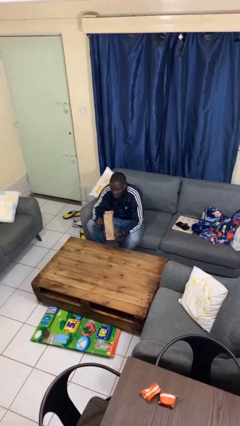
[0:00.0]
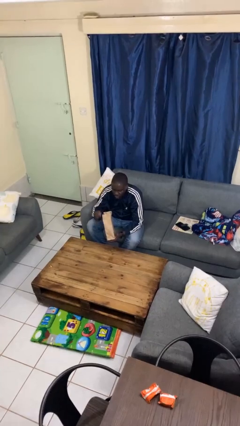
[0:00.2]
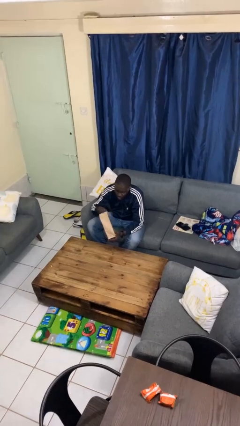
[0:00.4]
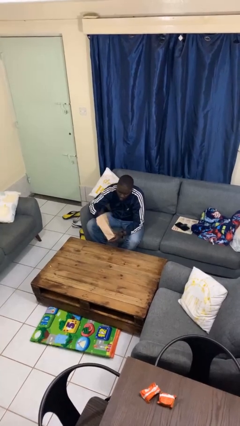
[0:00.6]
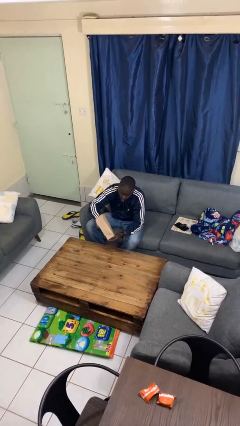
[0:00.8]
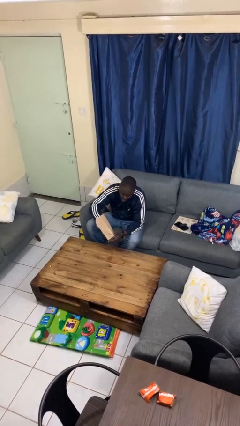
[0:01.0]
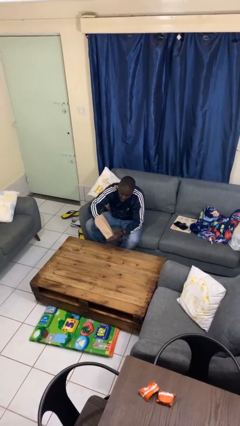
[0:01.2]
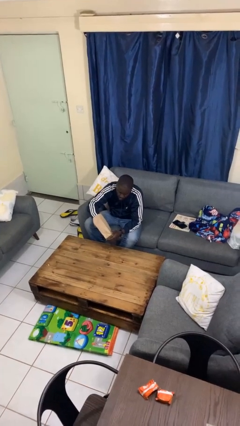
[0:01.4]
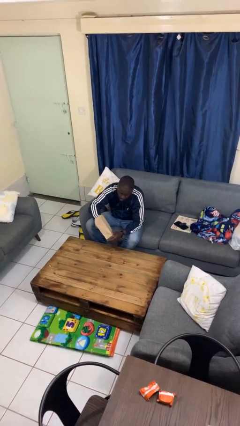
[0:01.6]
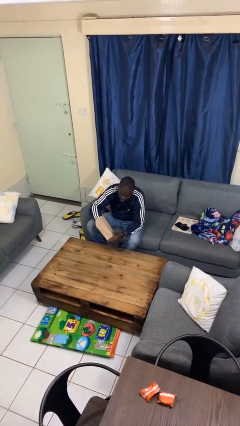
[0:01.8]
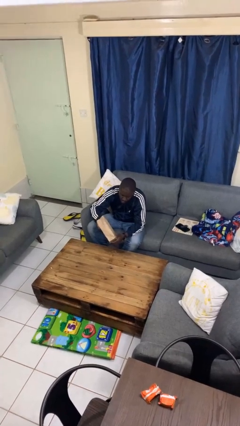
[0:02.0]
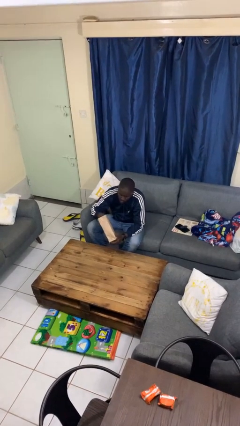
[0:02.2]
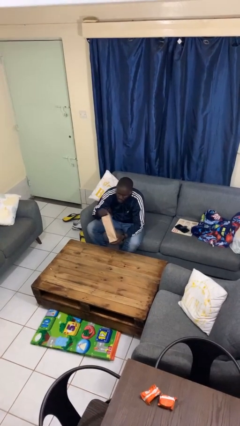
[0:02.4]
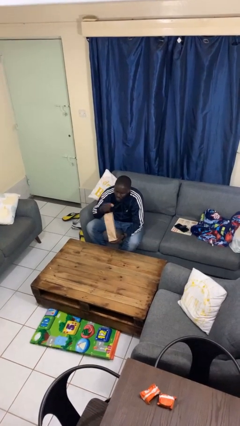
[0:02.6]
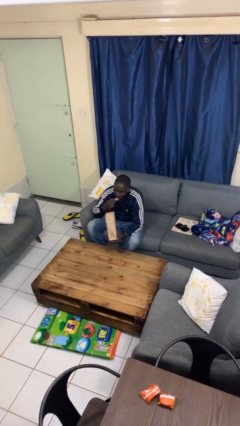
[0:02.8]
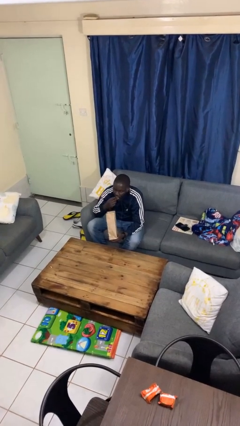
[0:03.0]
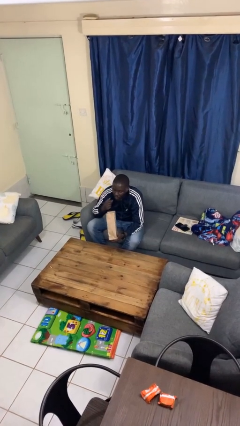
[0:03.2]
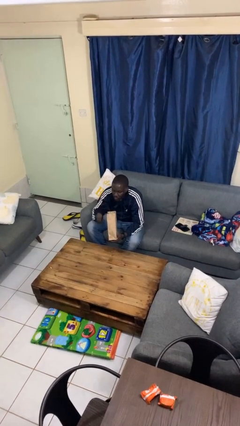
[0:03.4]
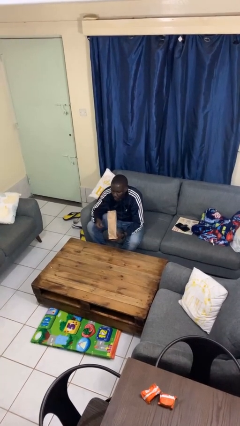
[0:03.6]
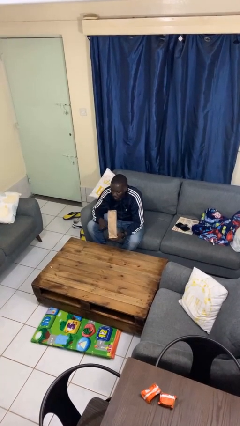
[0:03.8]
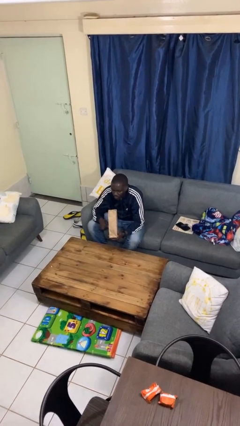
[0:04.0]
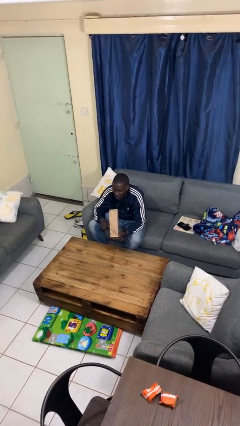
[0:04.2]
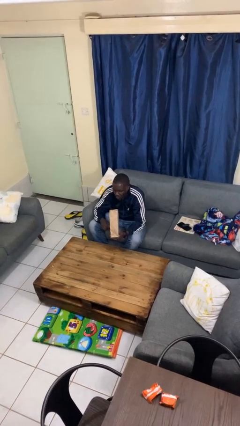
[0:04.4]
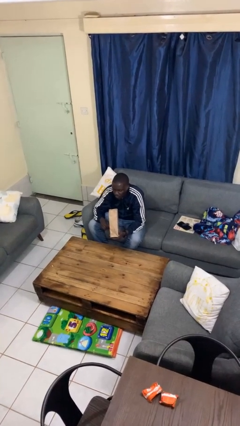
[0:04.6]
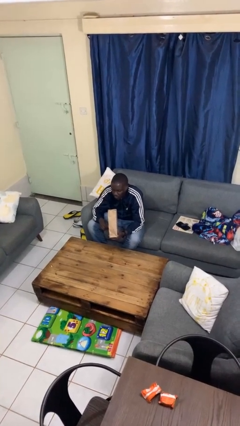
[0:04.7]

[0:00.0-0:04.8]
person eats snack from bag

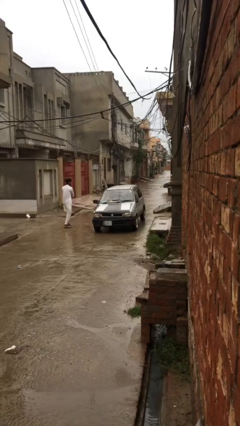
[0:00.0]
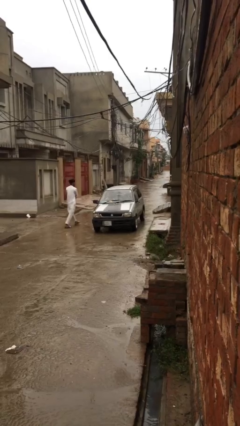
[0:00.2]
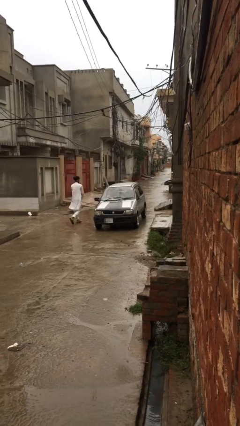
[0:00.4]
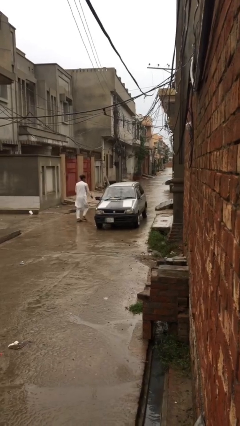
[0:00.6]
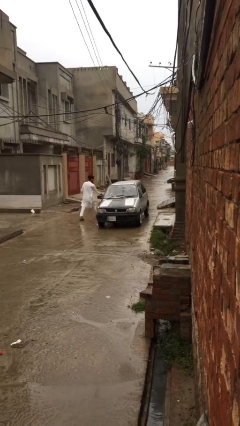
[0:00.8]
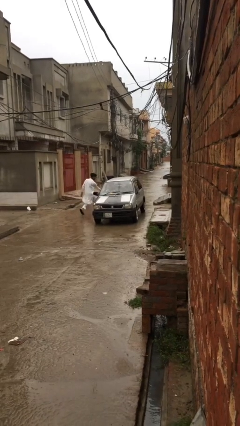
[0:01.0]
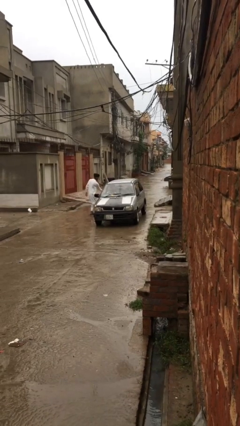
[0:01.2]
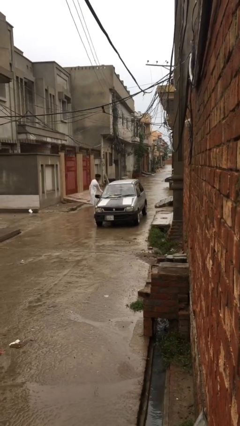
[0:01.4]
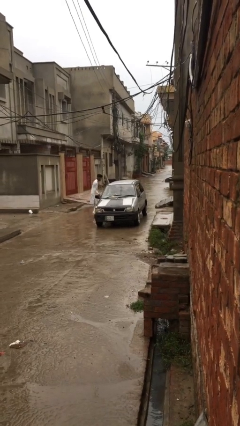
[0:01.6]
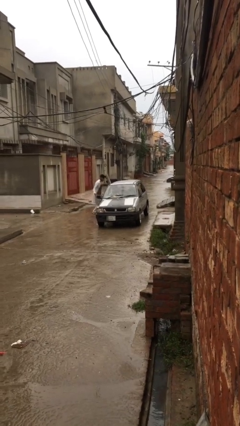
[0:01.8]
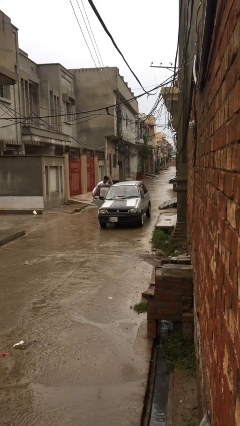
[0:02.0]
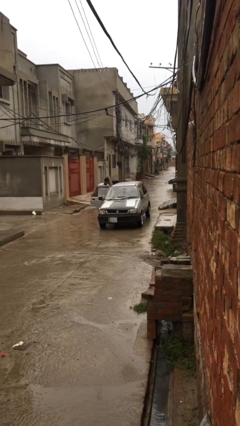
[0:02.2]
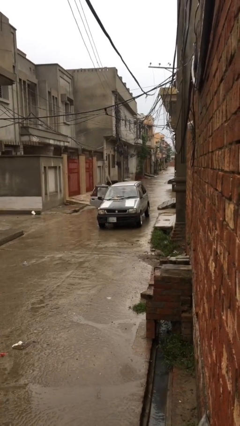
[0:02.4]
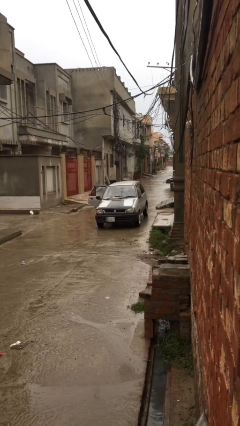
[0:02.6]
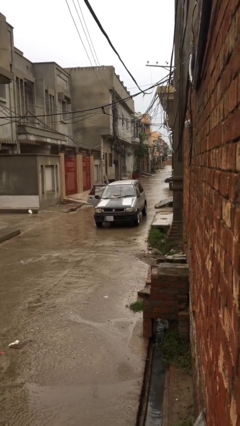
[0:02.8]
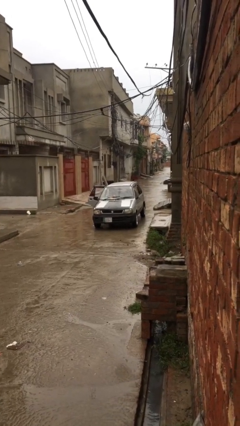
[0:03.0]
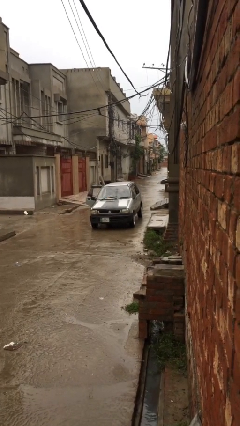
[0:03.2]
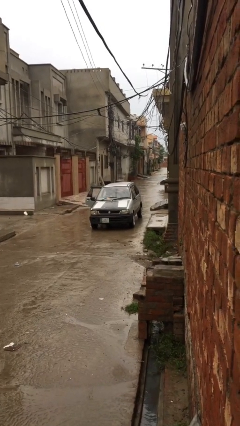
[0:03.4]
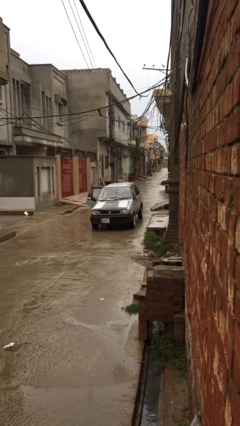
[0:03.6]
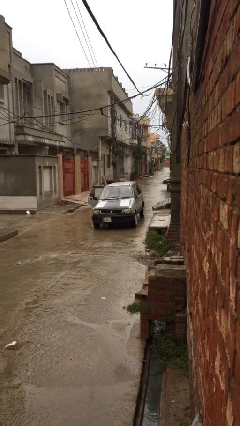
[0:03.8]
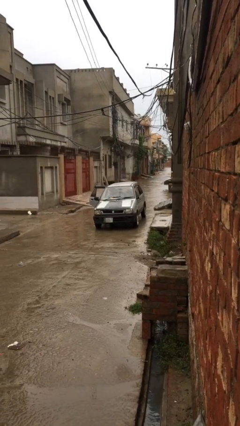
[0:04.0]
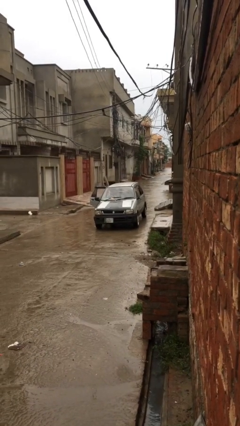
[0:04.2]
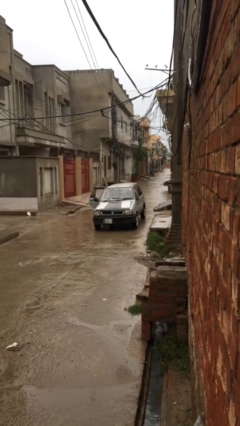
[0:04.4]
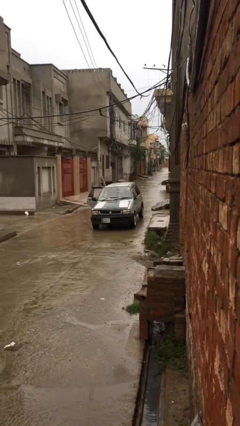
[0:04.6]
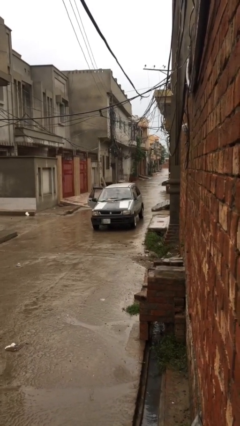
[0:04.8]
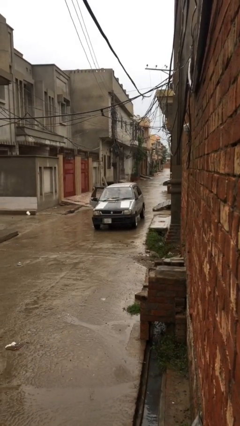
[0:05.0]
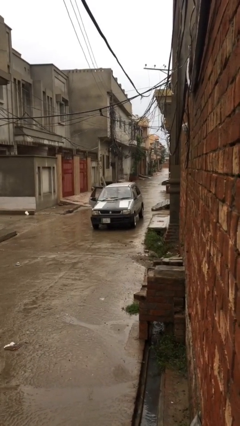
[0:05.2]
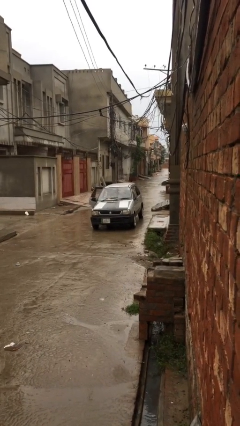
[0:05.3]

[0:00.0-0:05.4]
car picks up person

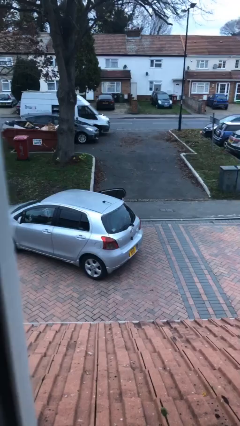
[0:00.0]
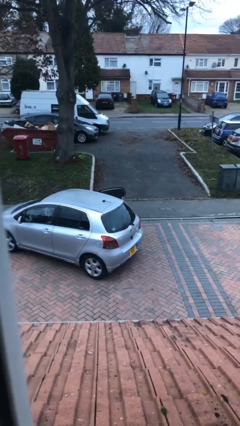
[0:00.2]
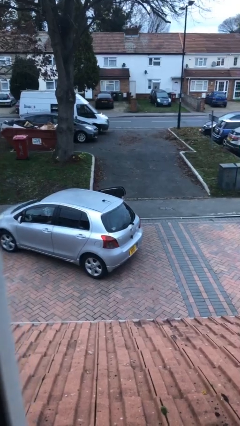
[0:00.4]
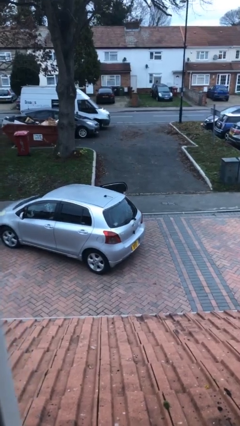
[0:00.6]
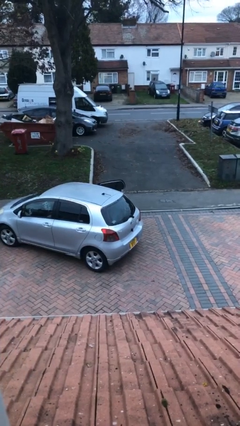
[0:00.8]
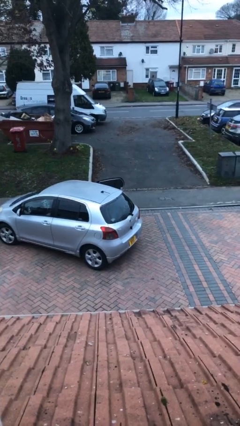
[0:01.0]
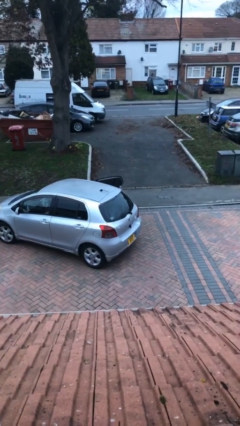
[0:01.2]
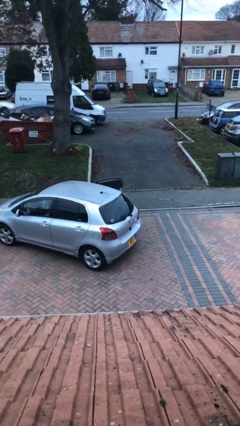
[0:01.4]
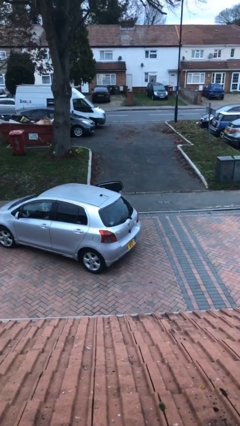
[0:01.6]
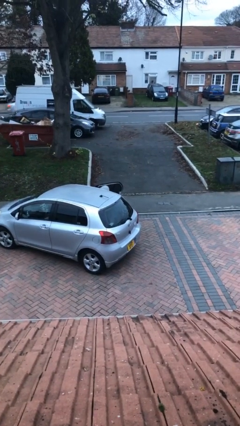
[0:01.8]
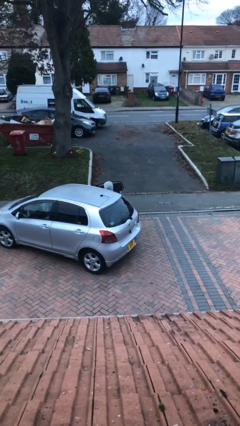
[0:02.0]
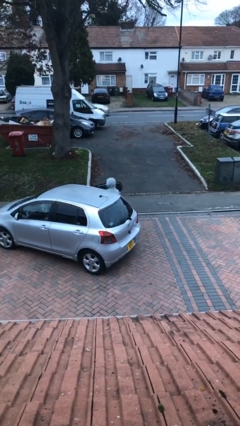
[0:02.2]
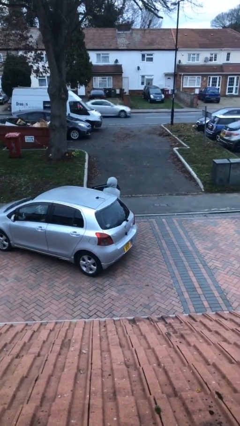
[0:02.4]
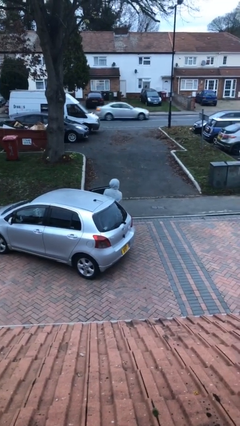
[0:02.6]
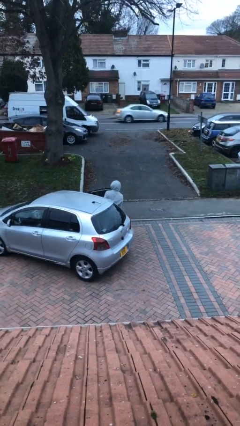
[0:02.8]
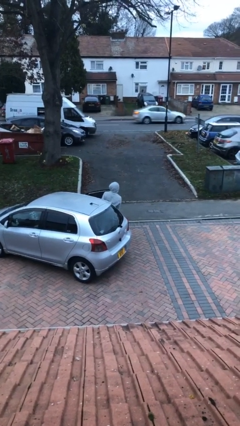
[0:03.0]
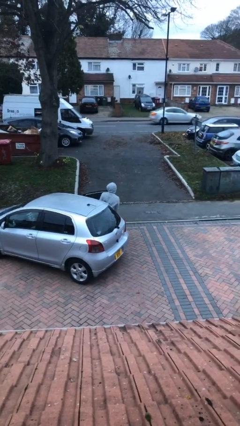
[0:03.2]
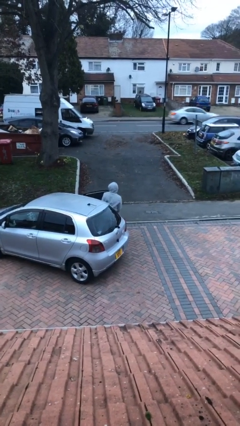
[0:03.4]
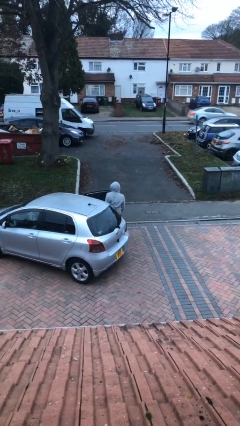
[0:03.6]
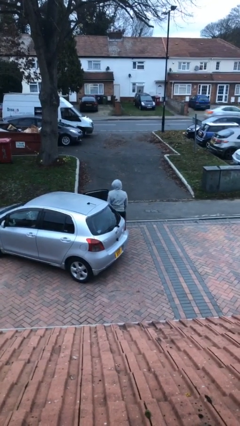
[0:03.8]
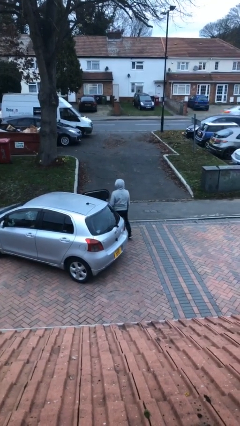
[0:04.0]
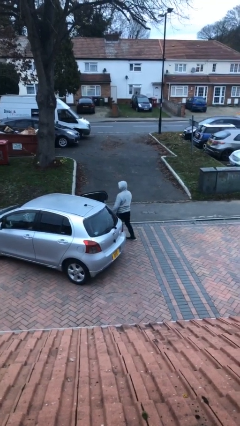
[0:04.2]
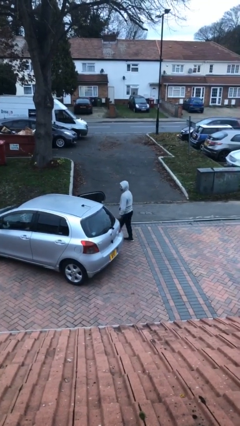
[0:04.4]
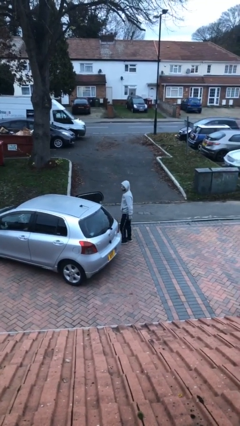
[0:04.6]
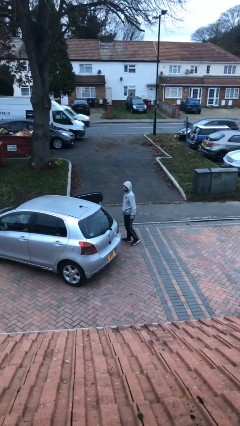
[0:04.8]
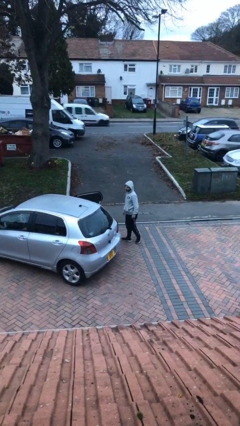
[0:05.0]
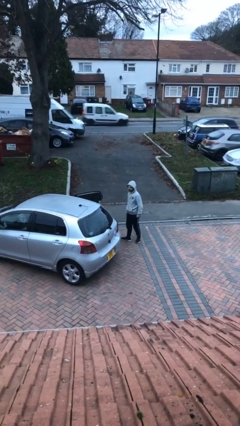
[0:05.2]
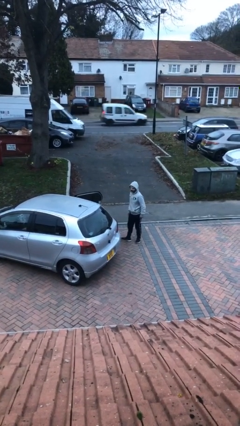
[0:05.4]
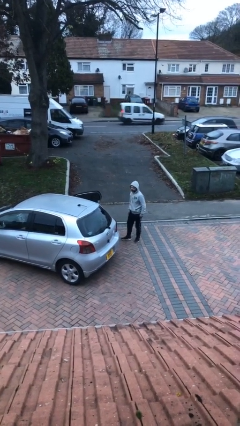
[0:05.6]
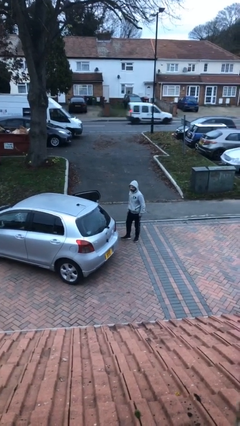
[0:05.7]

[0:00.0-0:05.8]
person exits car

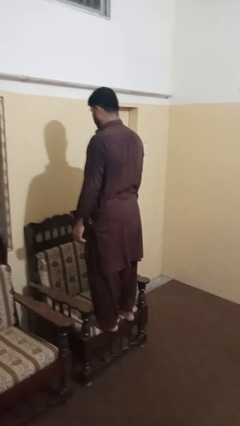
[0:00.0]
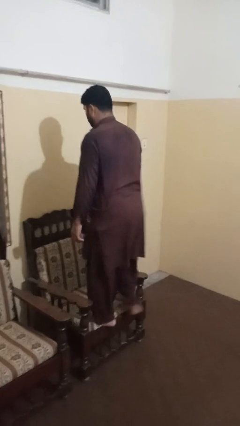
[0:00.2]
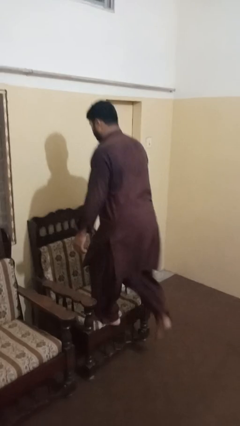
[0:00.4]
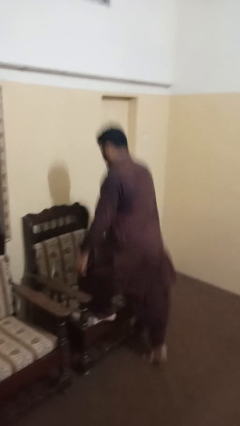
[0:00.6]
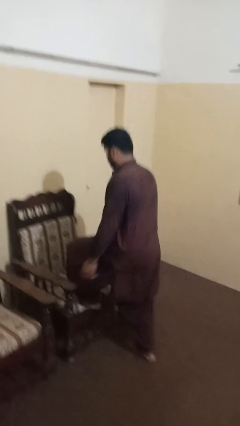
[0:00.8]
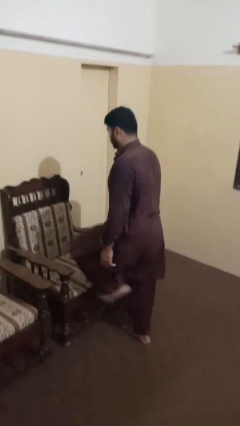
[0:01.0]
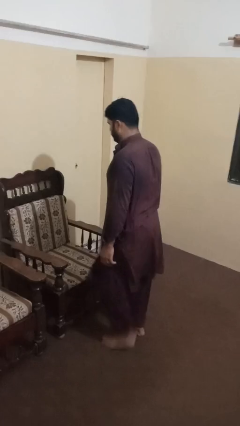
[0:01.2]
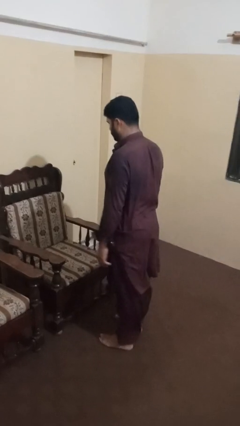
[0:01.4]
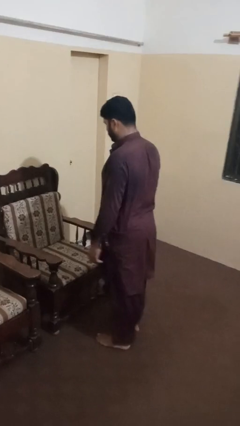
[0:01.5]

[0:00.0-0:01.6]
person climbs off chair

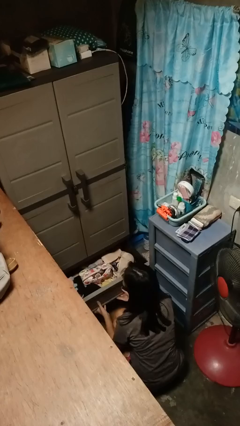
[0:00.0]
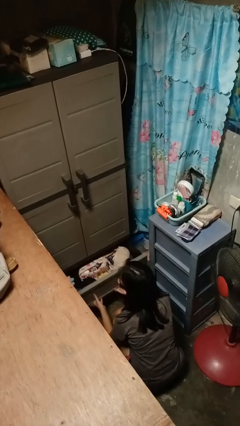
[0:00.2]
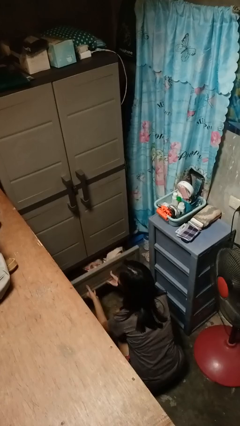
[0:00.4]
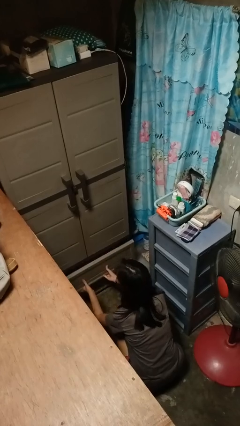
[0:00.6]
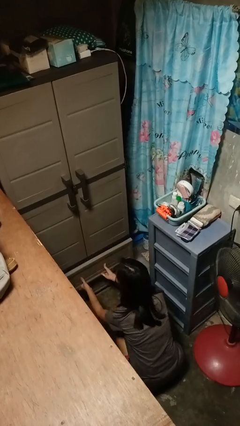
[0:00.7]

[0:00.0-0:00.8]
person closes dresser drawer
